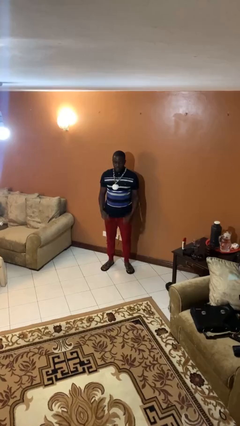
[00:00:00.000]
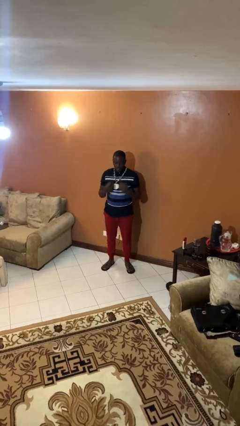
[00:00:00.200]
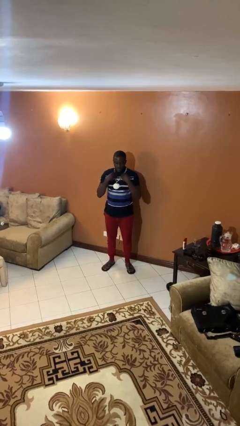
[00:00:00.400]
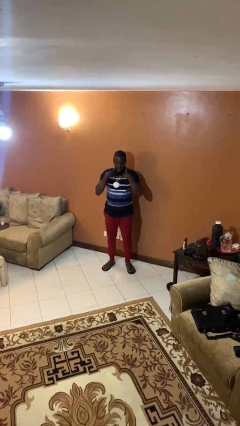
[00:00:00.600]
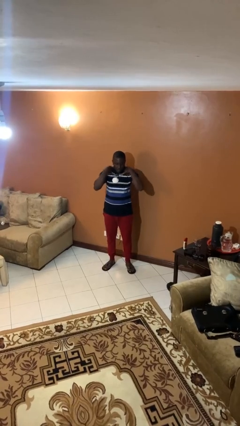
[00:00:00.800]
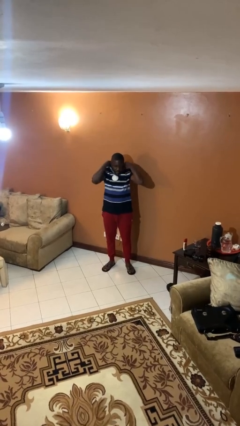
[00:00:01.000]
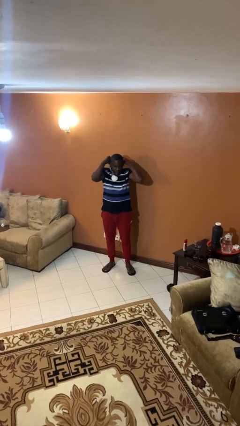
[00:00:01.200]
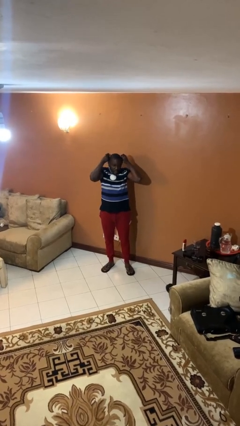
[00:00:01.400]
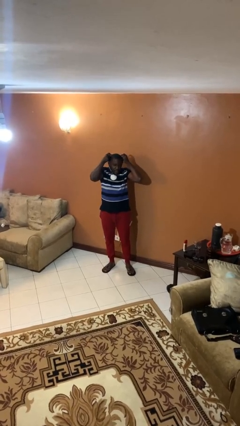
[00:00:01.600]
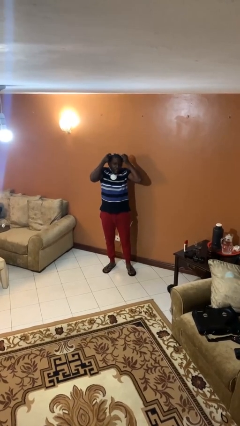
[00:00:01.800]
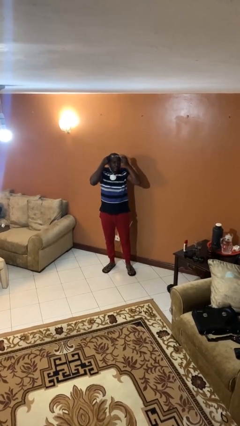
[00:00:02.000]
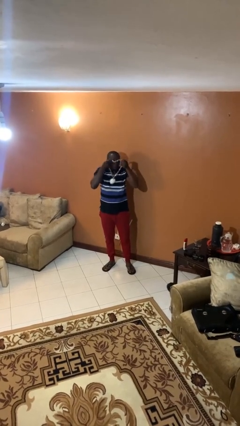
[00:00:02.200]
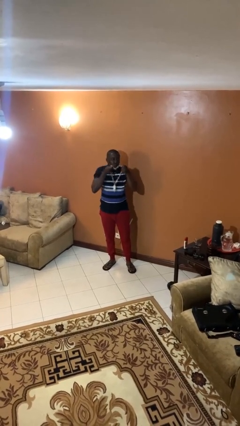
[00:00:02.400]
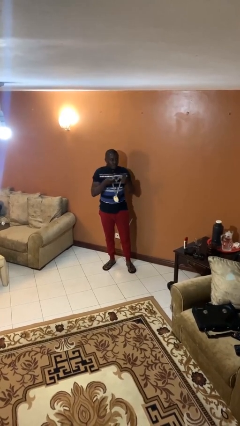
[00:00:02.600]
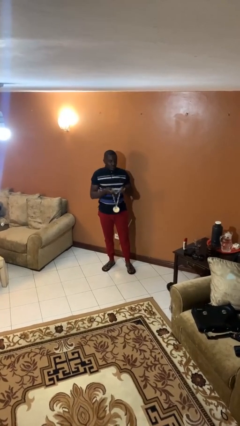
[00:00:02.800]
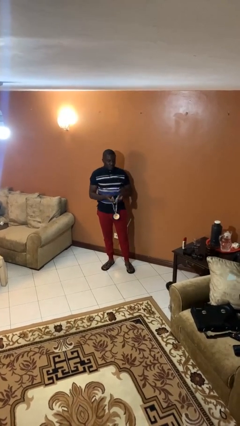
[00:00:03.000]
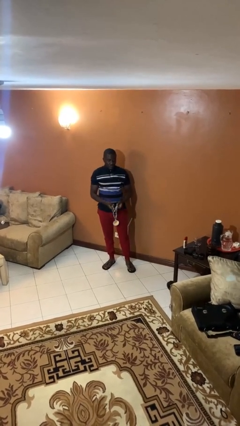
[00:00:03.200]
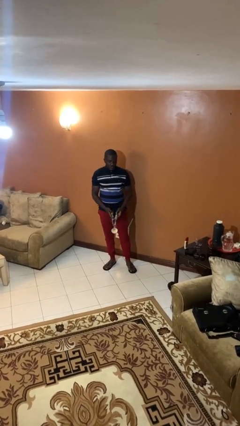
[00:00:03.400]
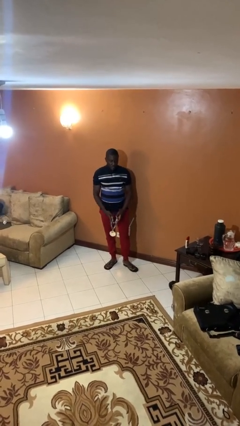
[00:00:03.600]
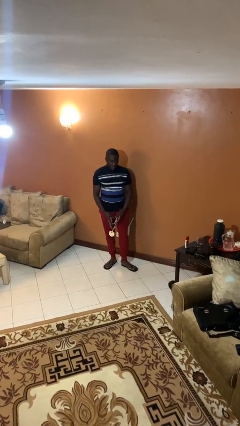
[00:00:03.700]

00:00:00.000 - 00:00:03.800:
person takes off necklace

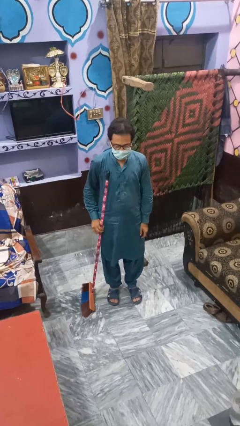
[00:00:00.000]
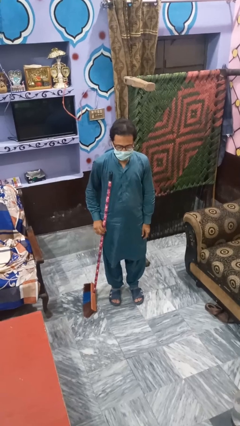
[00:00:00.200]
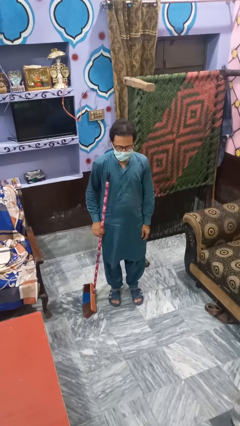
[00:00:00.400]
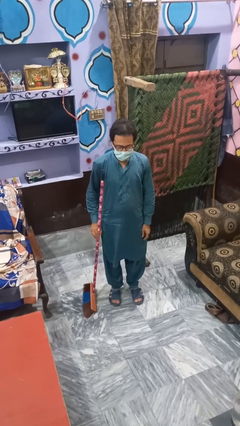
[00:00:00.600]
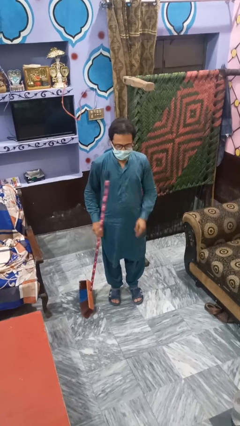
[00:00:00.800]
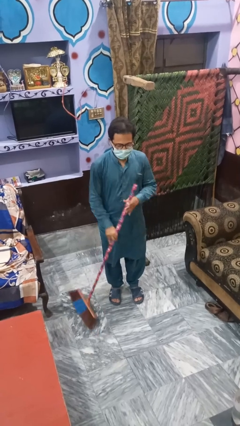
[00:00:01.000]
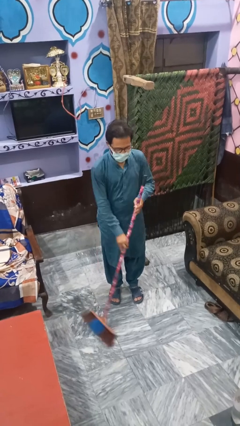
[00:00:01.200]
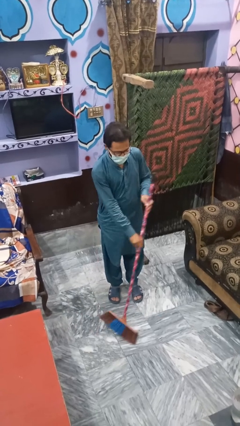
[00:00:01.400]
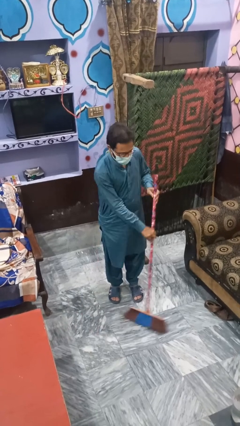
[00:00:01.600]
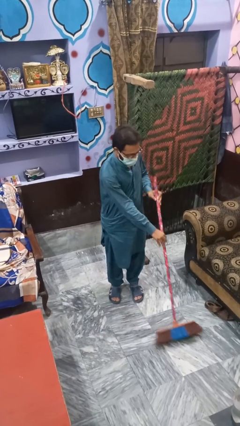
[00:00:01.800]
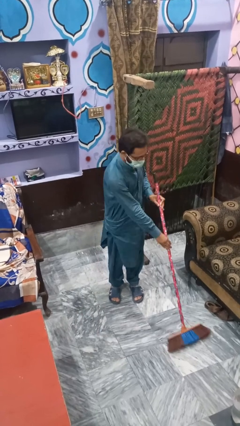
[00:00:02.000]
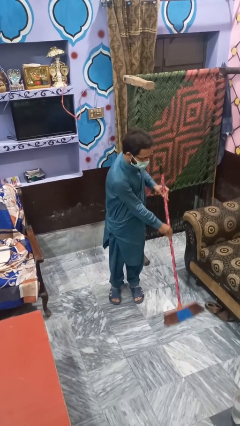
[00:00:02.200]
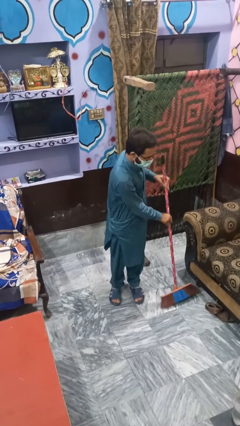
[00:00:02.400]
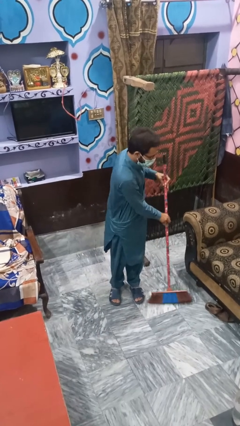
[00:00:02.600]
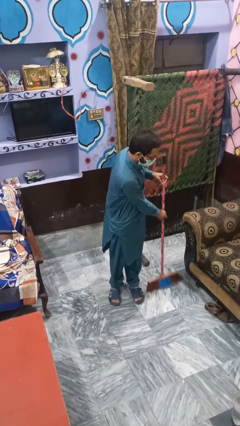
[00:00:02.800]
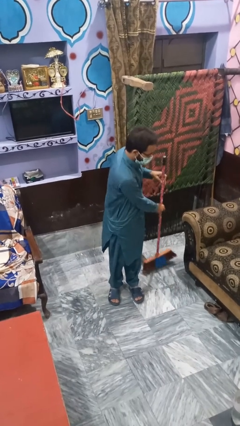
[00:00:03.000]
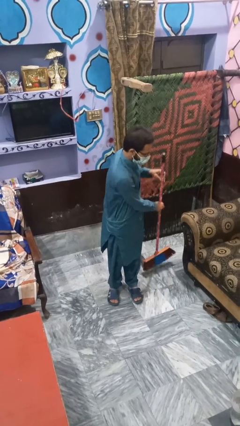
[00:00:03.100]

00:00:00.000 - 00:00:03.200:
person mops

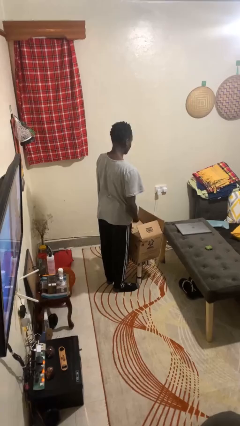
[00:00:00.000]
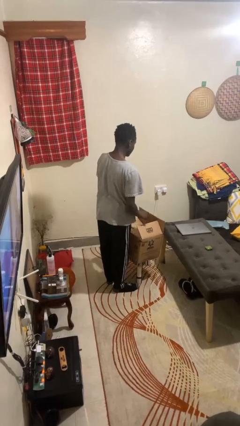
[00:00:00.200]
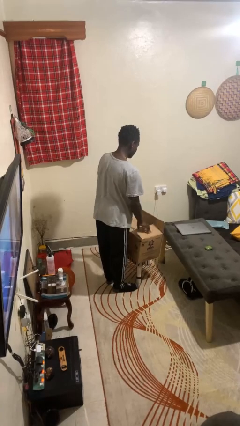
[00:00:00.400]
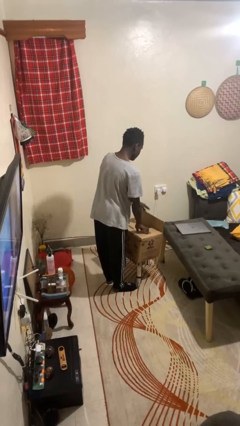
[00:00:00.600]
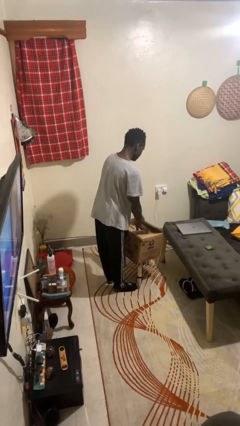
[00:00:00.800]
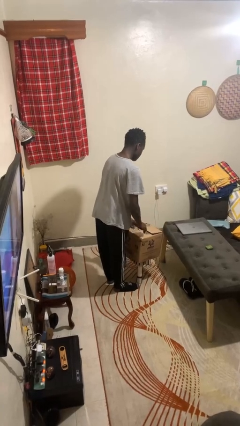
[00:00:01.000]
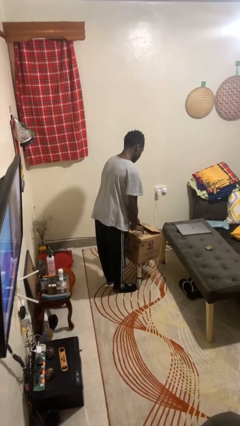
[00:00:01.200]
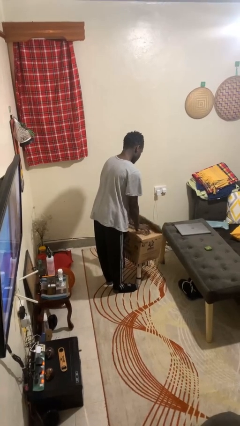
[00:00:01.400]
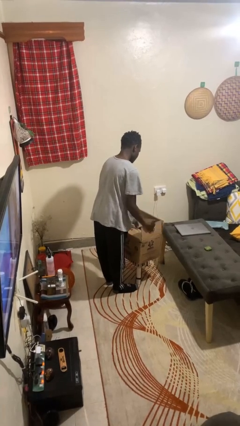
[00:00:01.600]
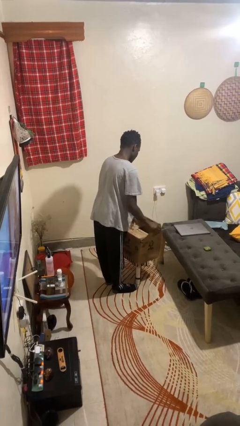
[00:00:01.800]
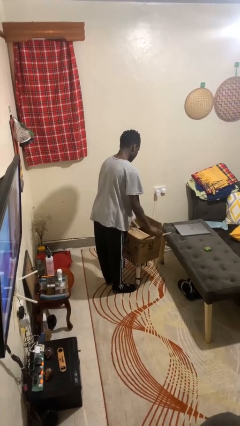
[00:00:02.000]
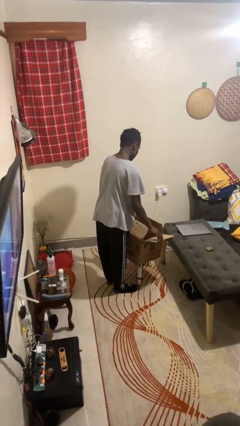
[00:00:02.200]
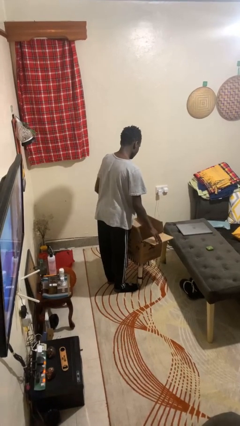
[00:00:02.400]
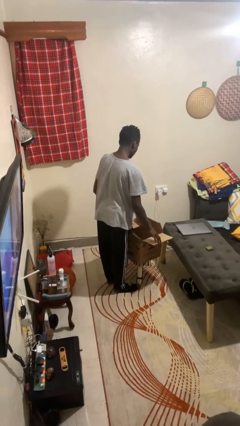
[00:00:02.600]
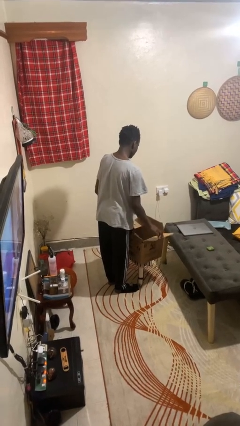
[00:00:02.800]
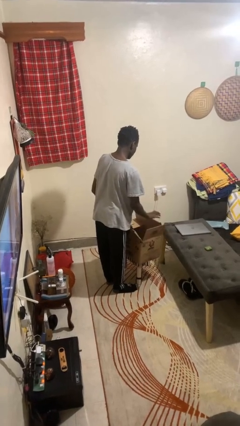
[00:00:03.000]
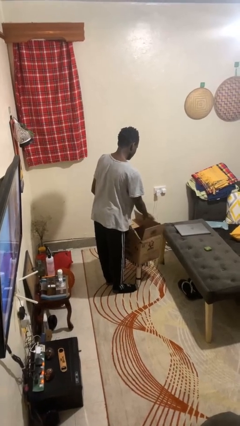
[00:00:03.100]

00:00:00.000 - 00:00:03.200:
person opens box

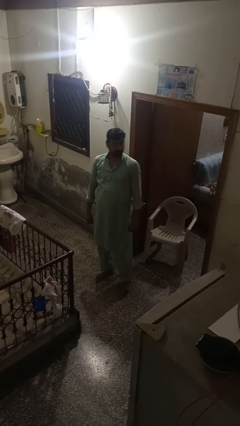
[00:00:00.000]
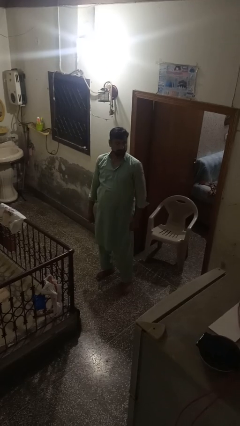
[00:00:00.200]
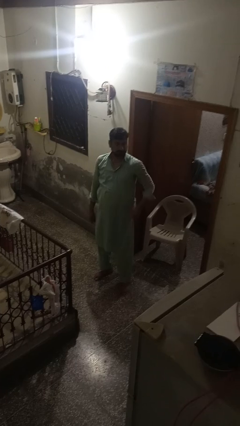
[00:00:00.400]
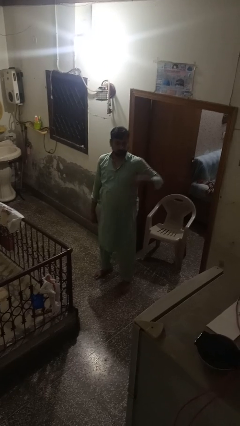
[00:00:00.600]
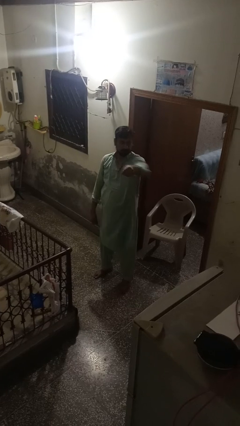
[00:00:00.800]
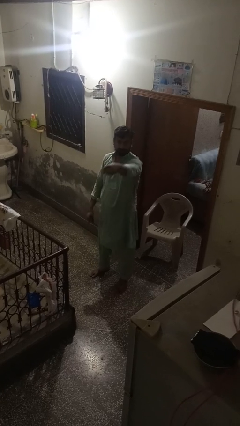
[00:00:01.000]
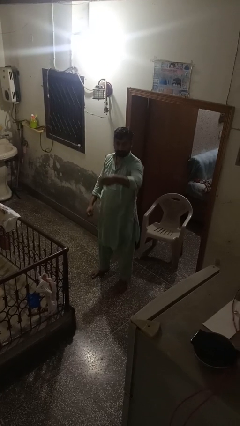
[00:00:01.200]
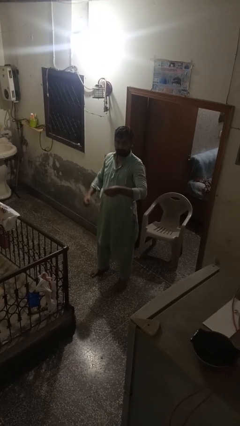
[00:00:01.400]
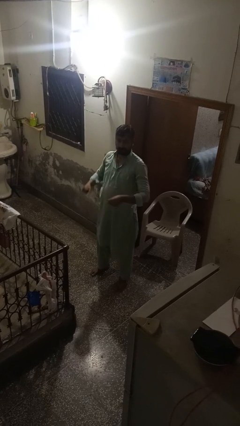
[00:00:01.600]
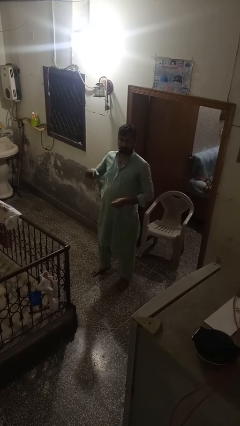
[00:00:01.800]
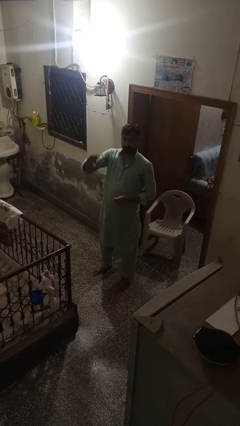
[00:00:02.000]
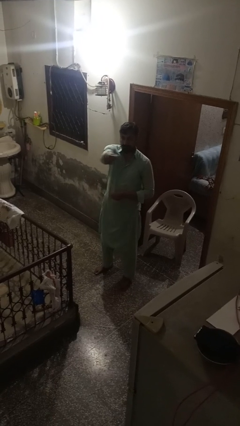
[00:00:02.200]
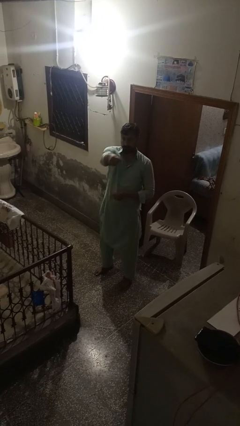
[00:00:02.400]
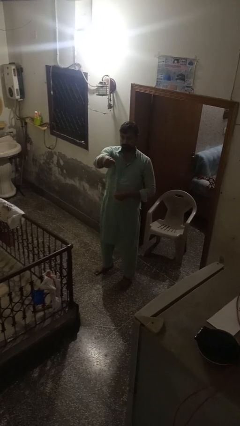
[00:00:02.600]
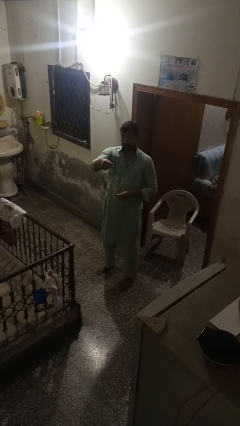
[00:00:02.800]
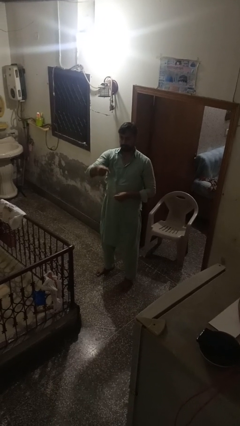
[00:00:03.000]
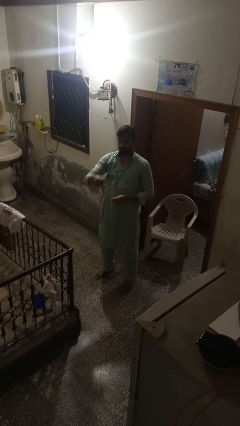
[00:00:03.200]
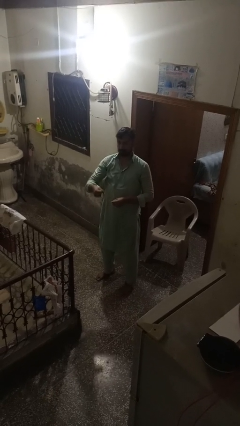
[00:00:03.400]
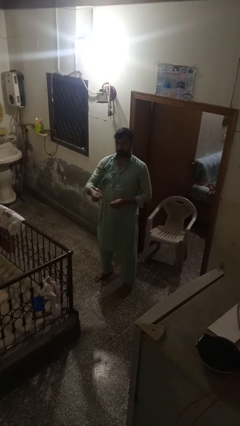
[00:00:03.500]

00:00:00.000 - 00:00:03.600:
person punches

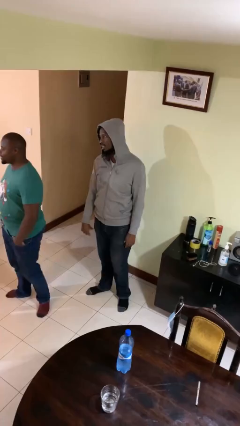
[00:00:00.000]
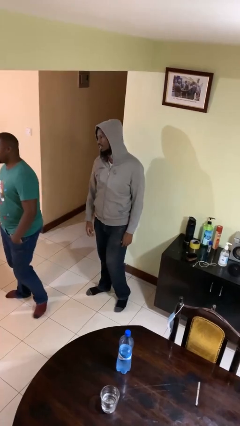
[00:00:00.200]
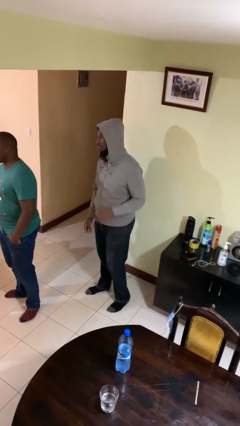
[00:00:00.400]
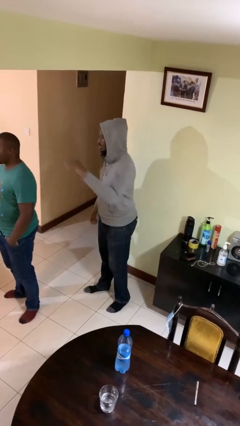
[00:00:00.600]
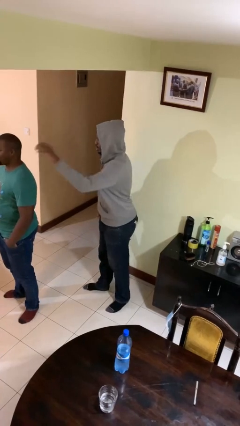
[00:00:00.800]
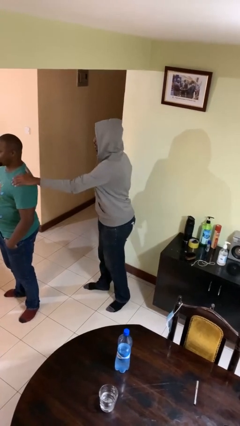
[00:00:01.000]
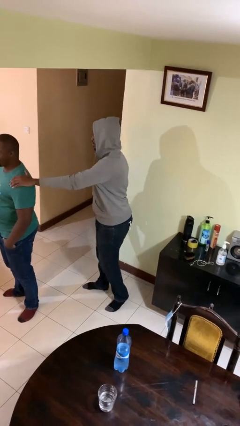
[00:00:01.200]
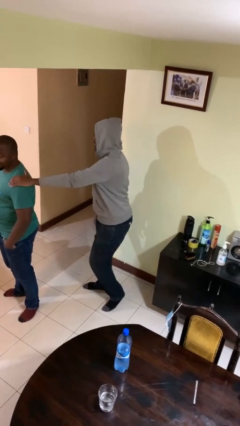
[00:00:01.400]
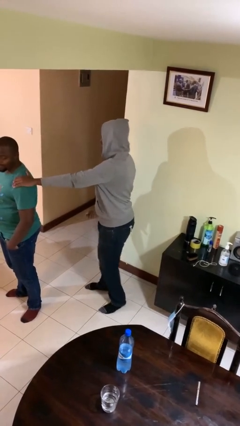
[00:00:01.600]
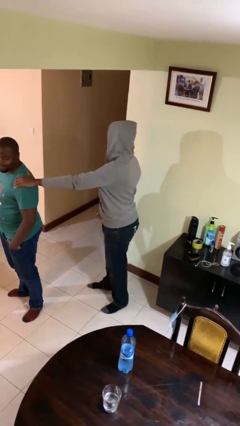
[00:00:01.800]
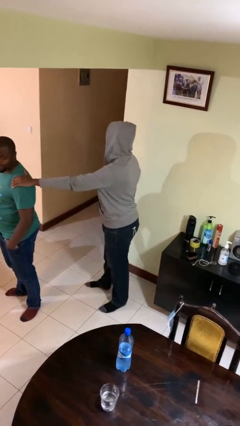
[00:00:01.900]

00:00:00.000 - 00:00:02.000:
person grabs person by shoulder

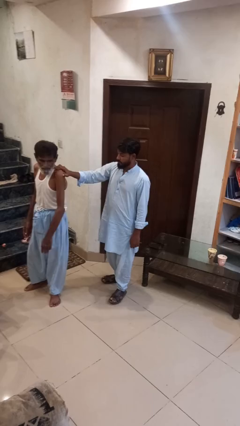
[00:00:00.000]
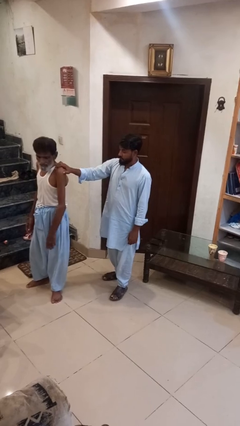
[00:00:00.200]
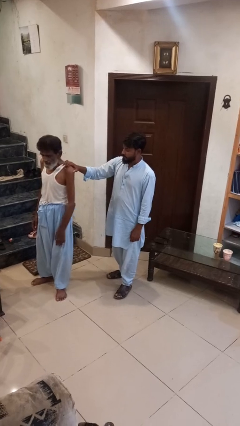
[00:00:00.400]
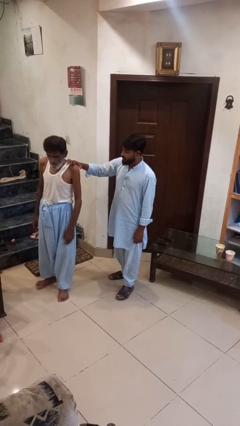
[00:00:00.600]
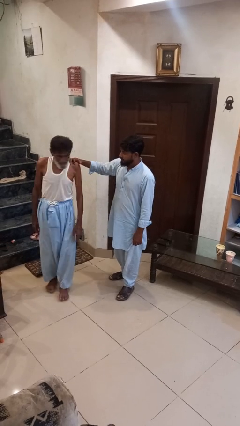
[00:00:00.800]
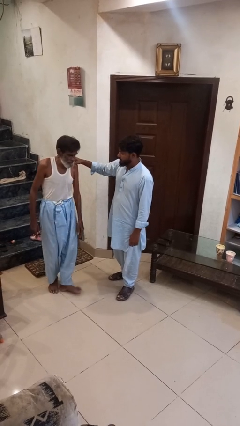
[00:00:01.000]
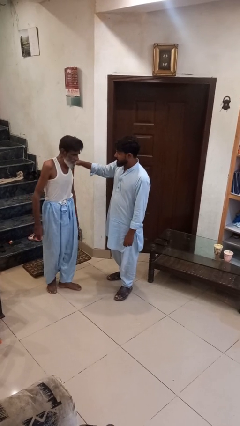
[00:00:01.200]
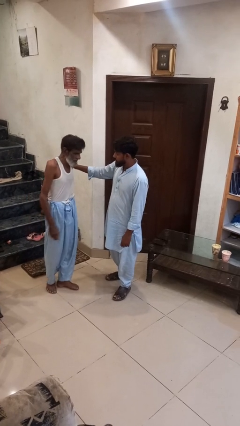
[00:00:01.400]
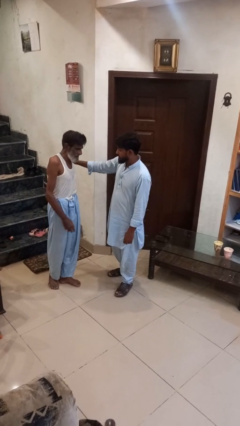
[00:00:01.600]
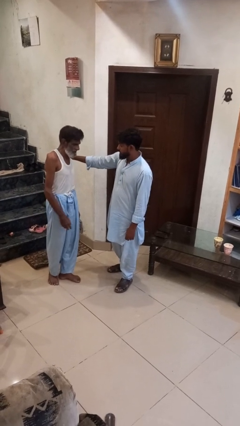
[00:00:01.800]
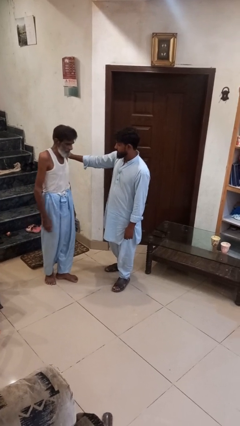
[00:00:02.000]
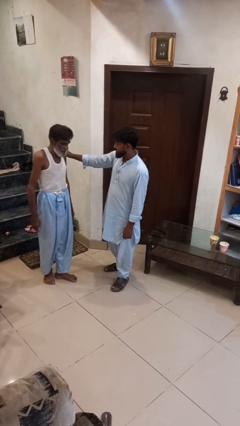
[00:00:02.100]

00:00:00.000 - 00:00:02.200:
person spins person around
